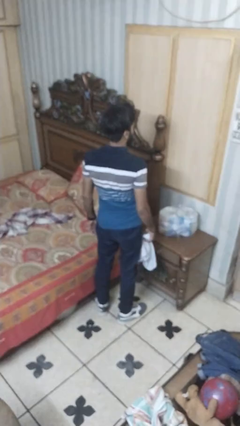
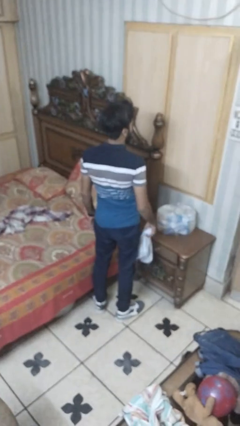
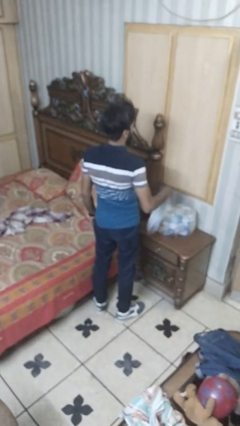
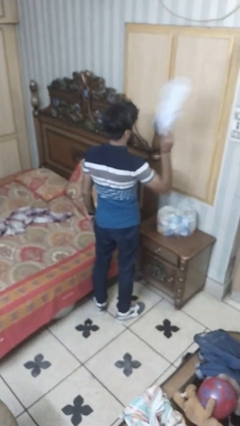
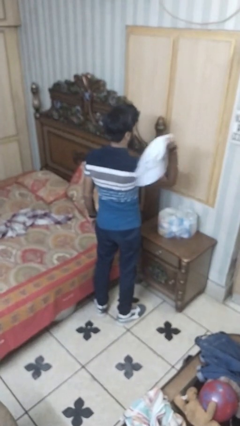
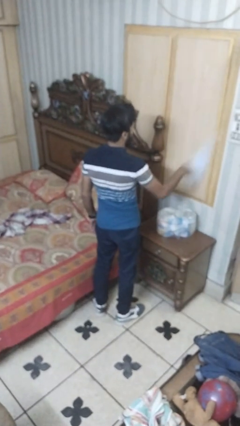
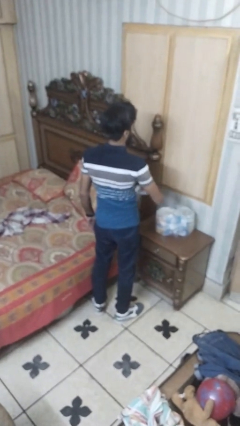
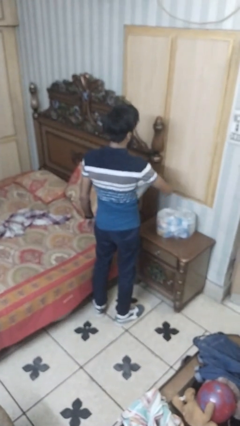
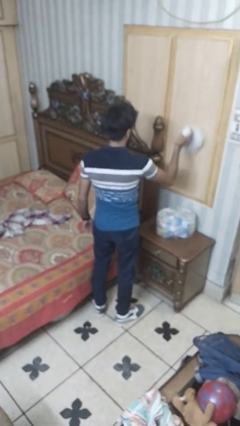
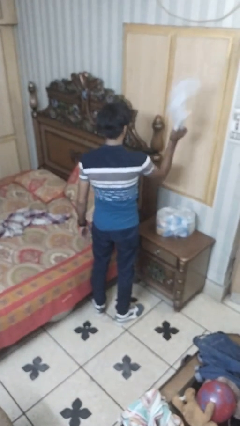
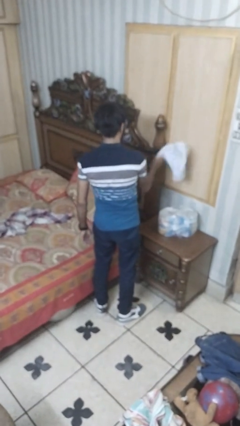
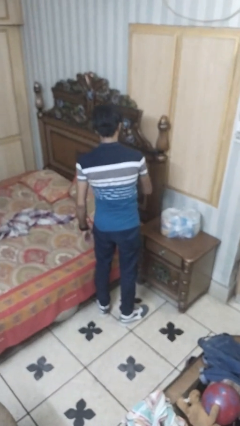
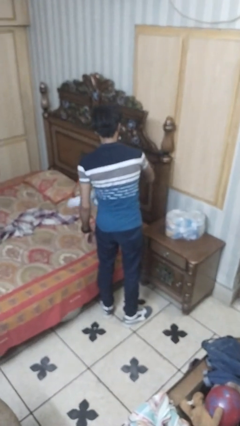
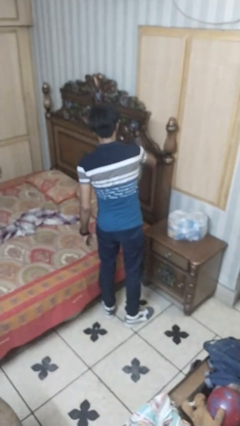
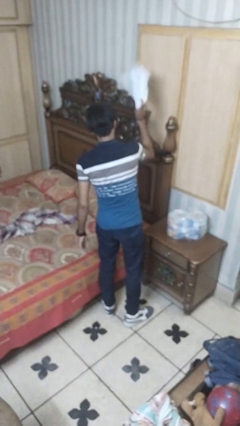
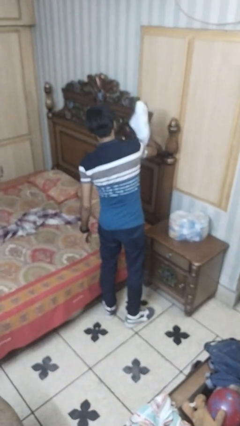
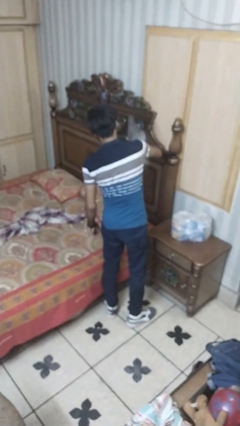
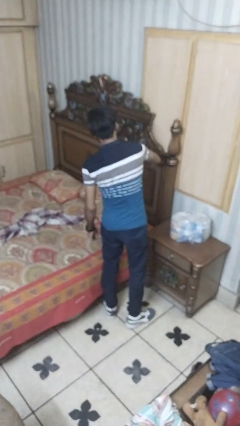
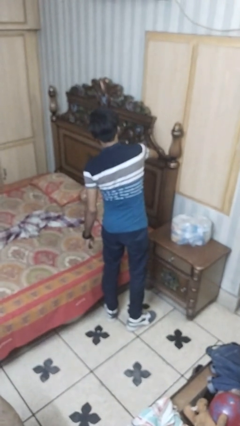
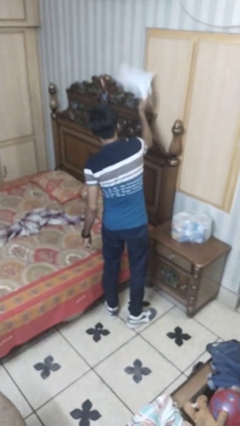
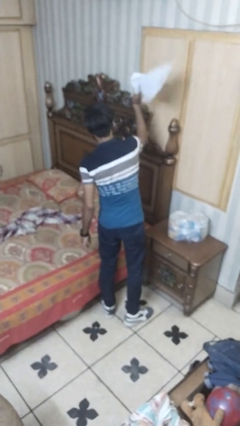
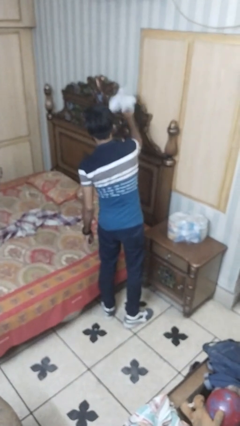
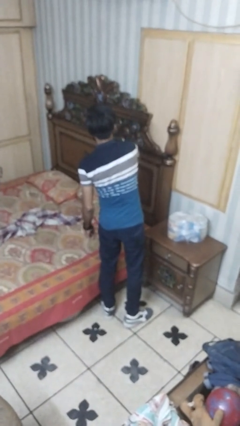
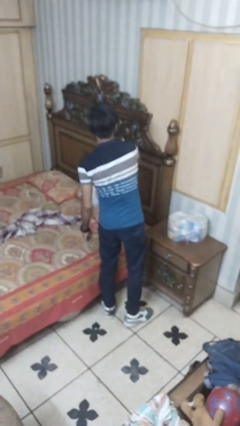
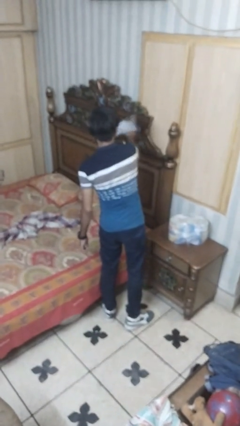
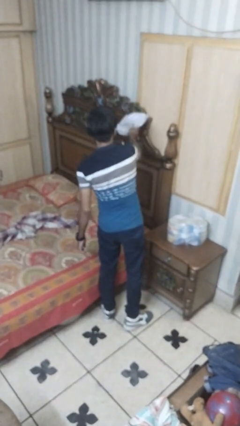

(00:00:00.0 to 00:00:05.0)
person dusts furniture

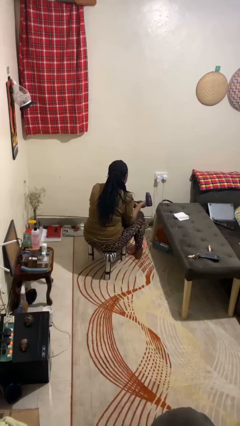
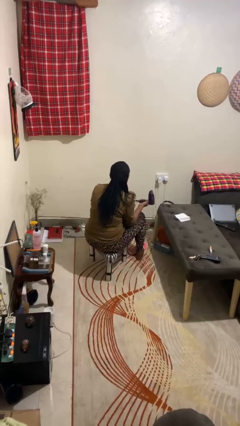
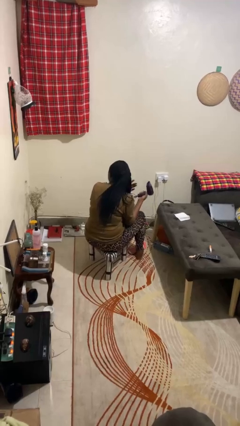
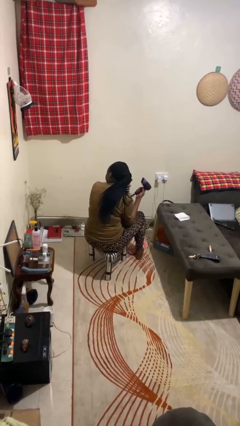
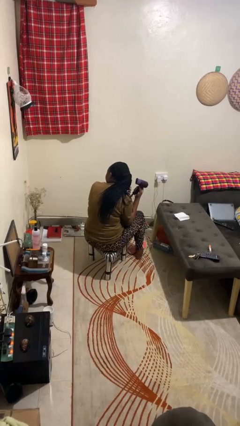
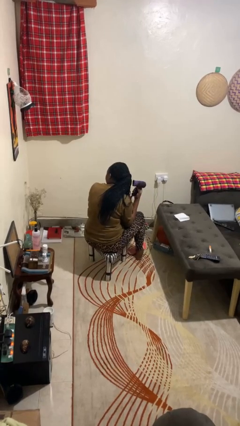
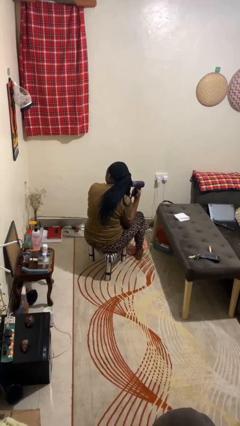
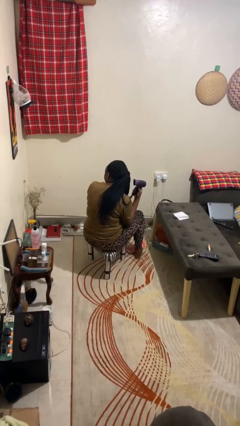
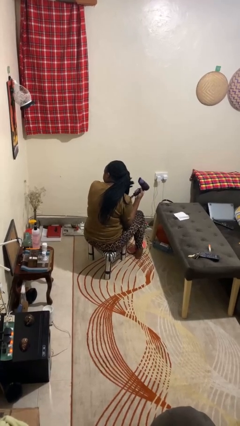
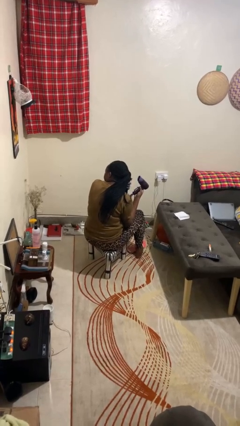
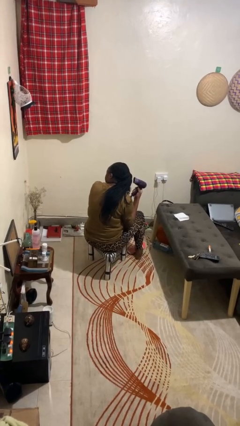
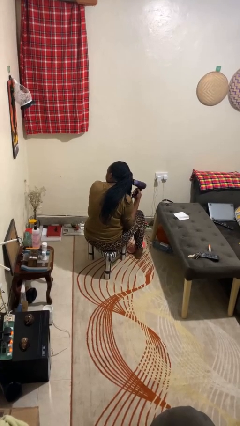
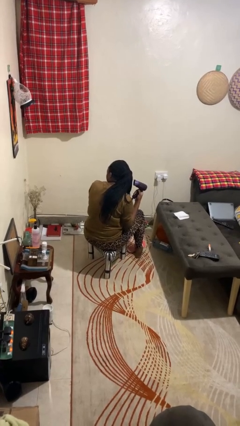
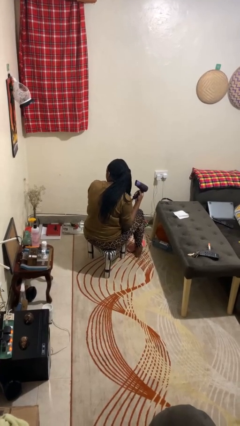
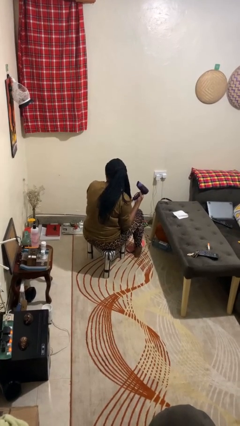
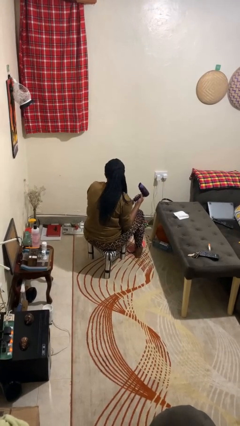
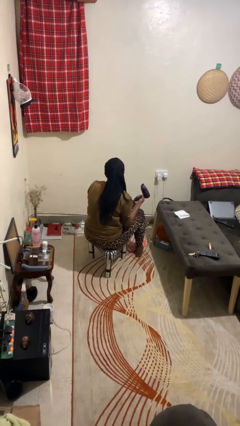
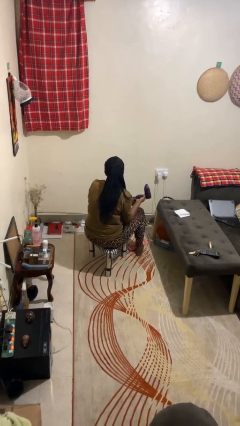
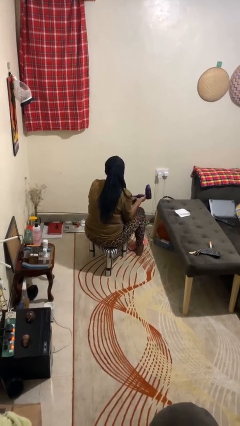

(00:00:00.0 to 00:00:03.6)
person dries hair with hairdryer

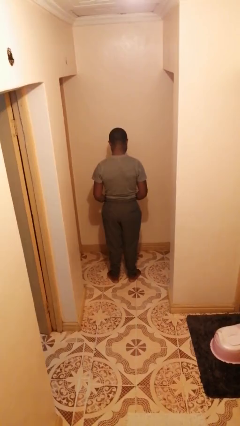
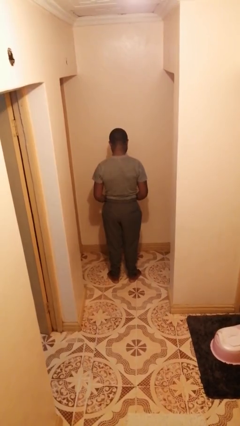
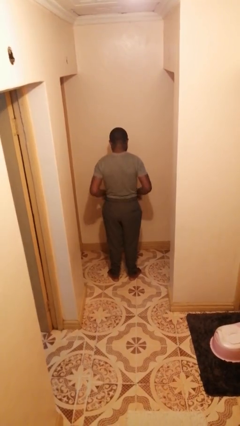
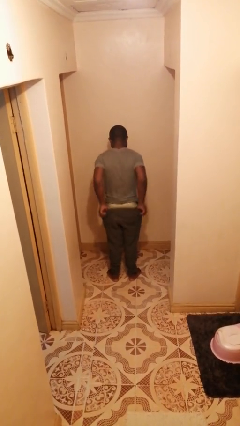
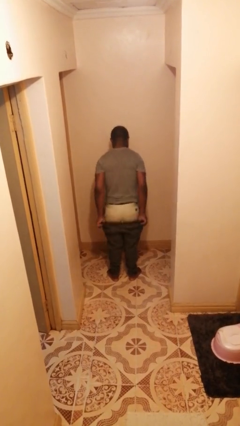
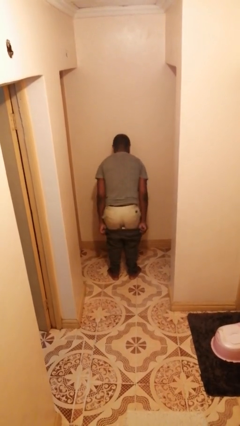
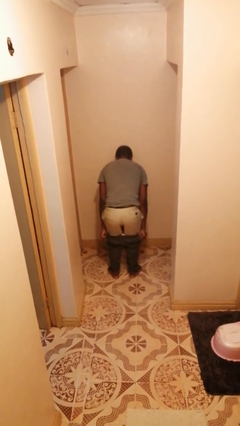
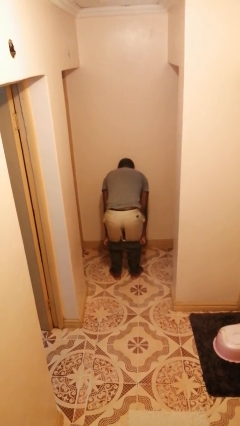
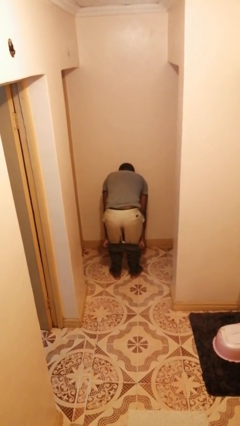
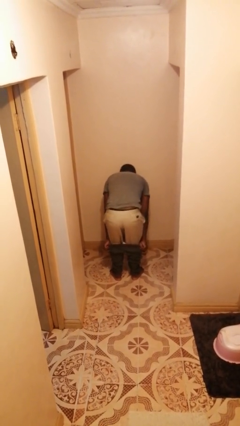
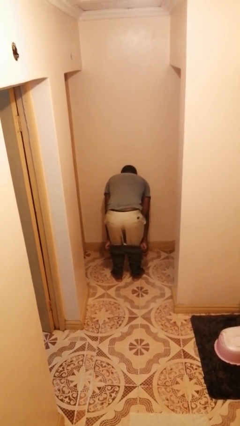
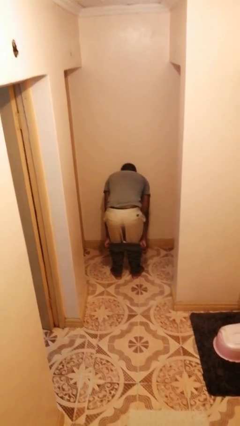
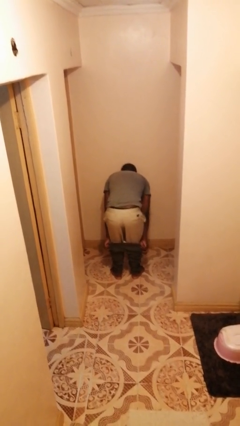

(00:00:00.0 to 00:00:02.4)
person takes off pants

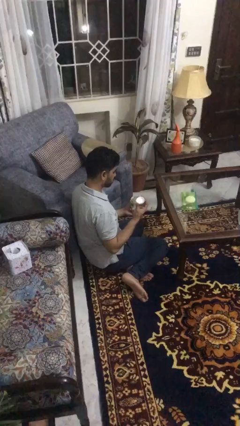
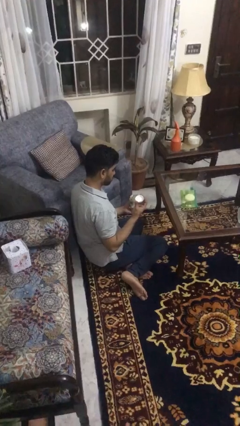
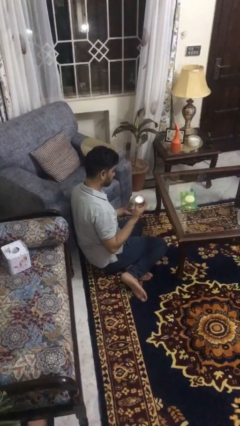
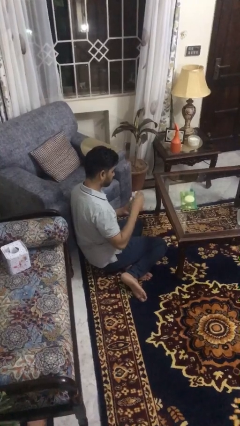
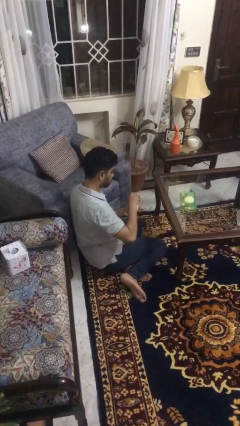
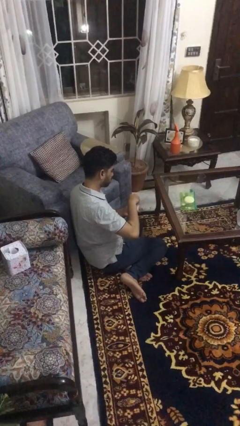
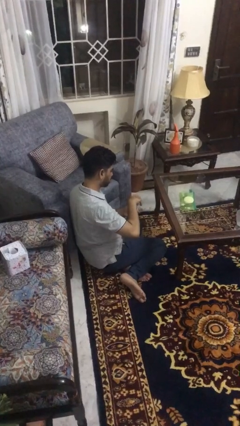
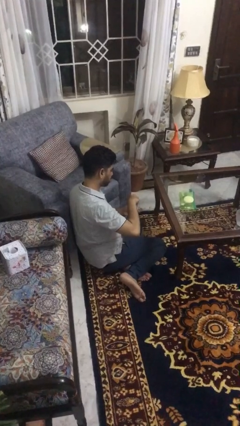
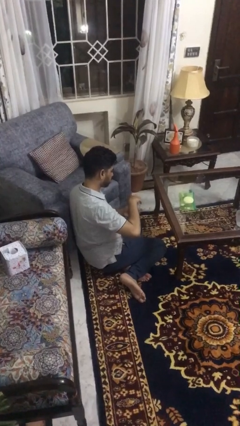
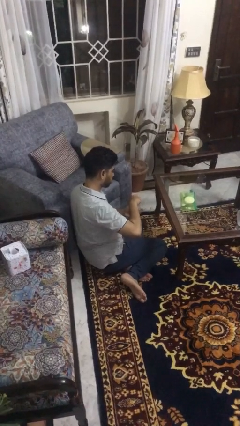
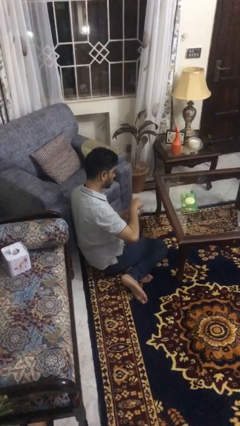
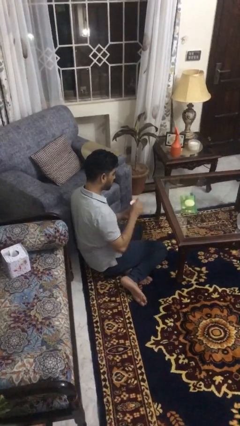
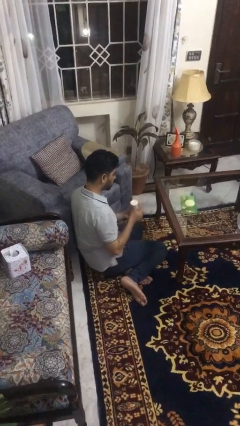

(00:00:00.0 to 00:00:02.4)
person closes jar

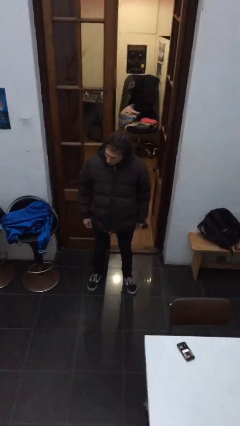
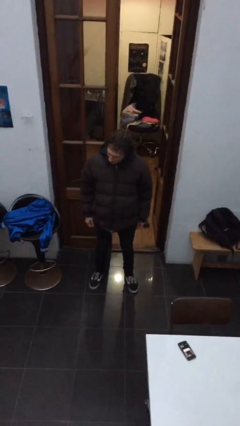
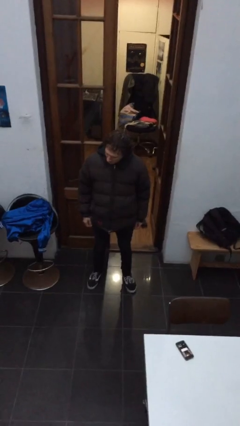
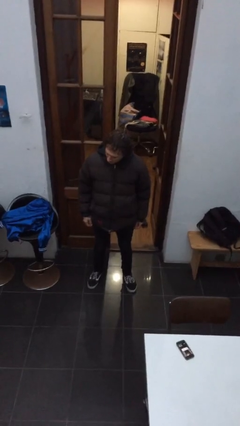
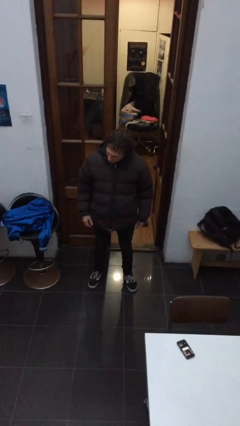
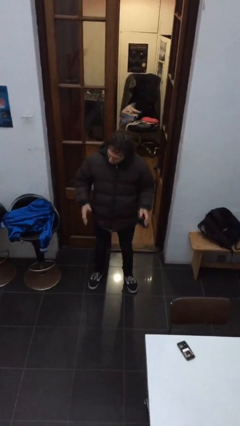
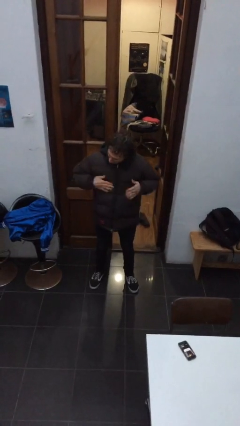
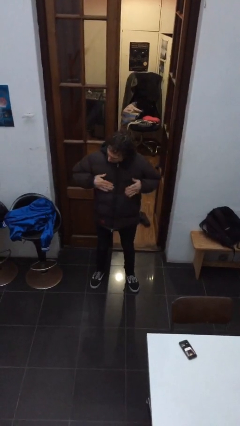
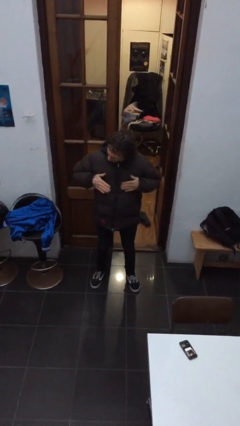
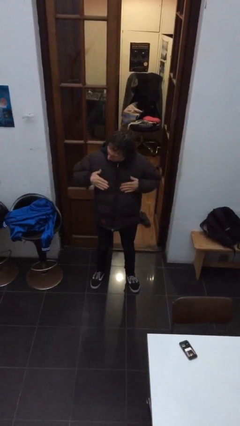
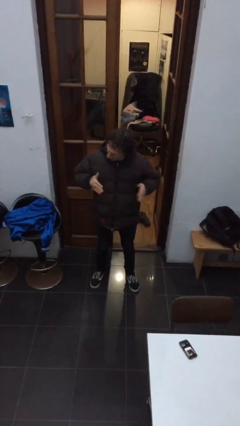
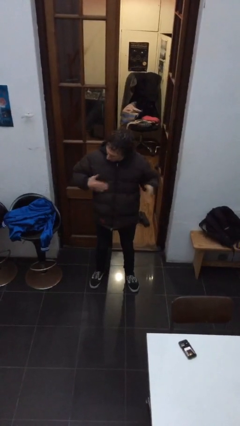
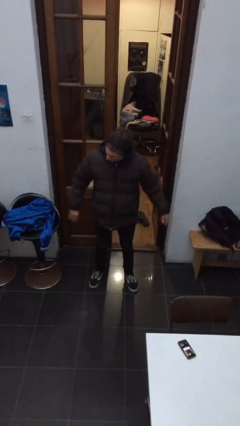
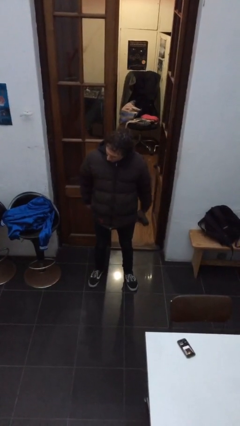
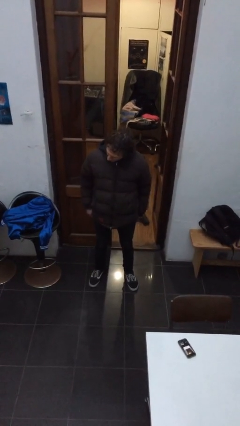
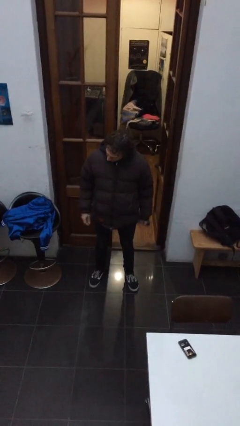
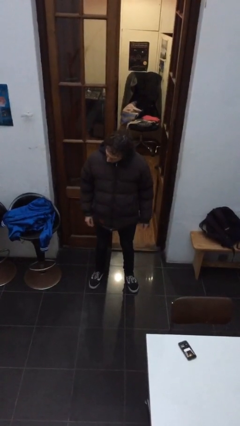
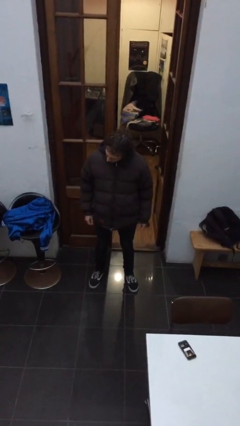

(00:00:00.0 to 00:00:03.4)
person drums on chest

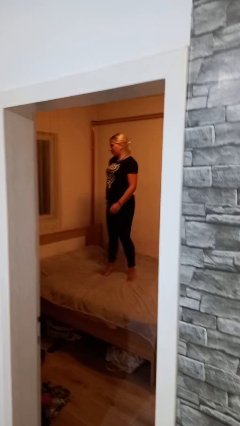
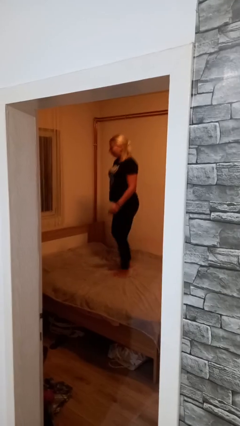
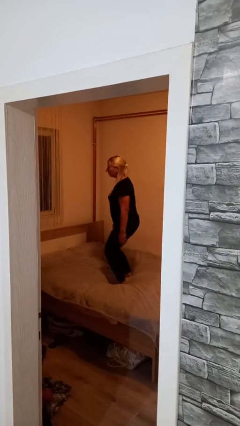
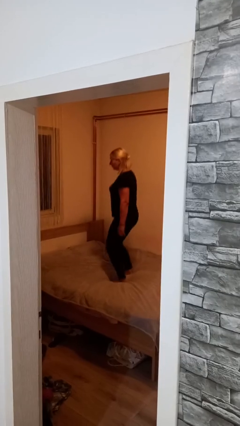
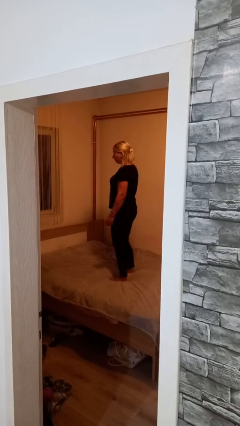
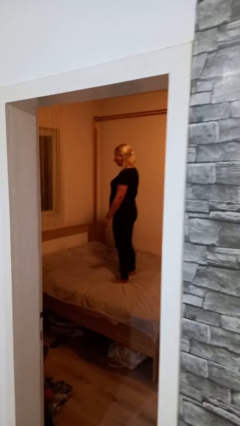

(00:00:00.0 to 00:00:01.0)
person jumps on bed
